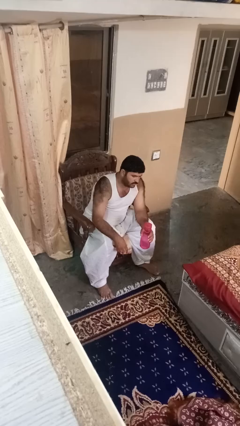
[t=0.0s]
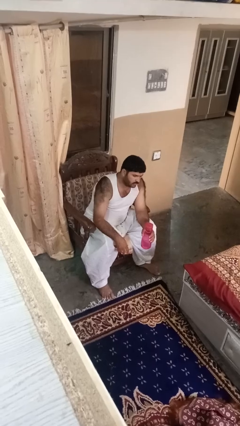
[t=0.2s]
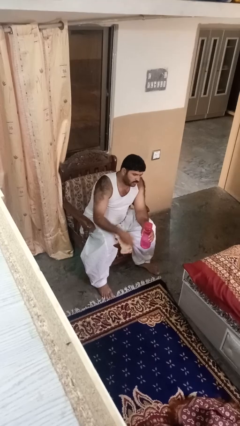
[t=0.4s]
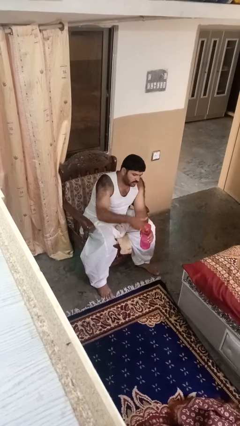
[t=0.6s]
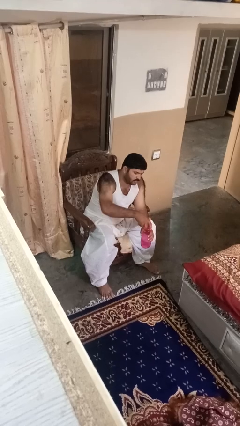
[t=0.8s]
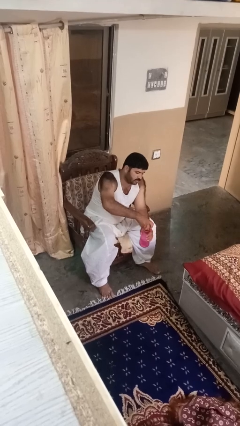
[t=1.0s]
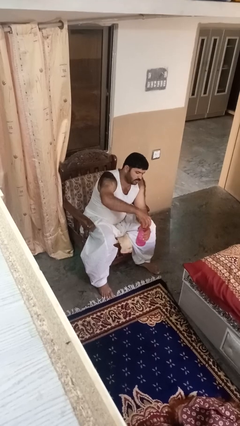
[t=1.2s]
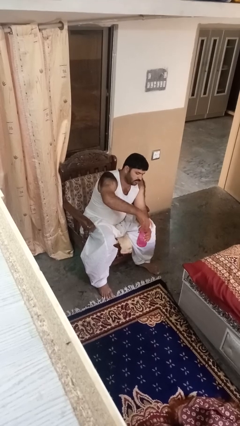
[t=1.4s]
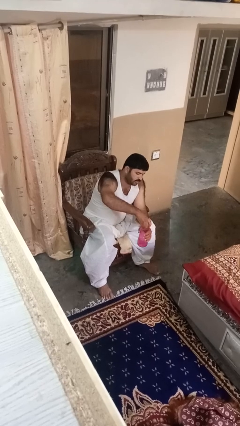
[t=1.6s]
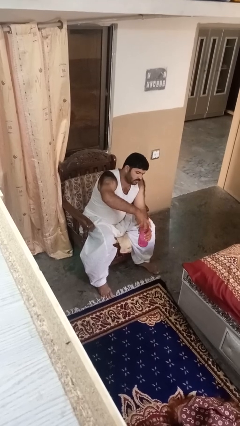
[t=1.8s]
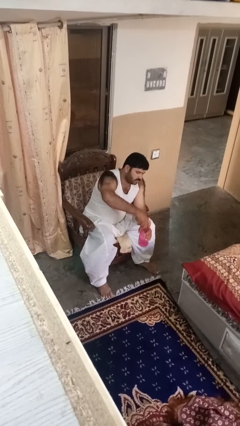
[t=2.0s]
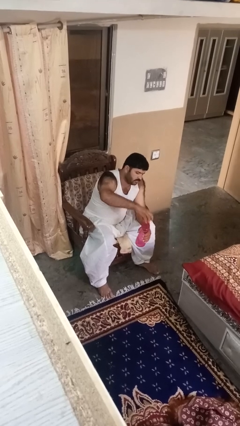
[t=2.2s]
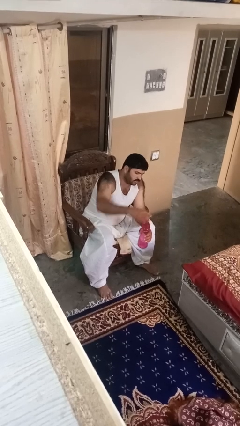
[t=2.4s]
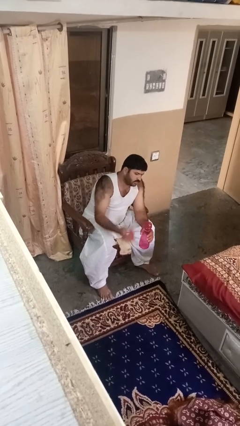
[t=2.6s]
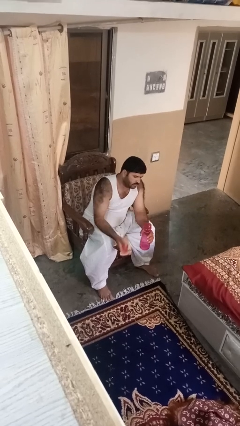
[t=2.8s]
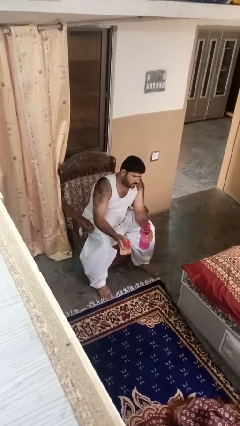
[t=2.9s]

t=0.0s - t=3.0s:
person unscrews lid from bottle

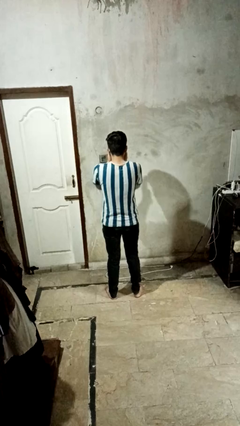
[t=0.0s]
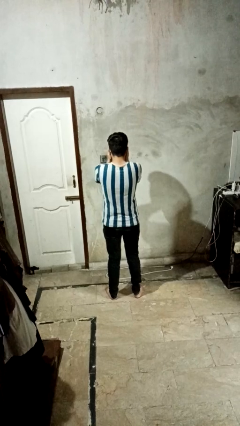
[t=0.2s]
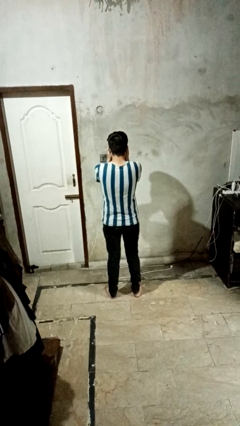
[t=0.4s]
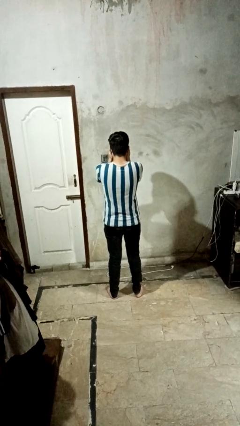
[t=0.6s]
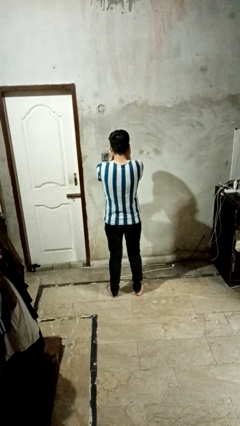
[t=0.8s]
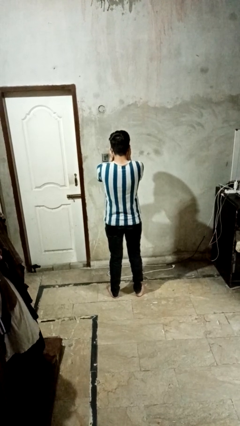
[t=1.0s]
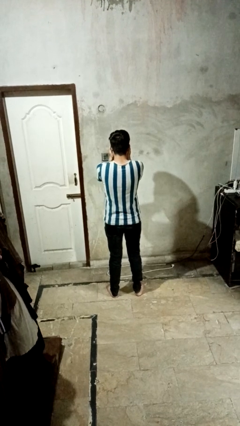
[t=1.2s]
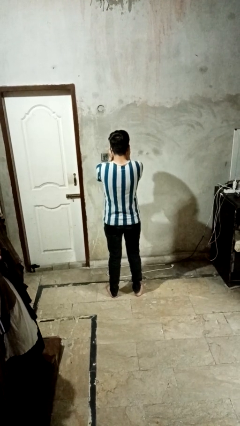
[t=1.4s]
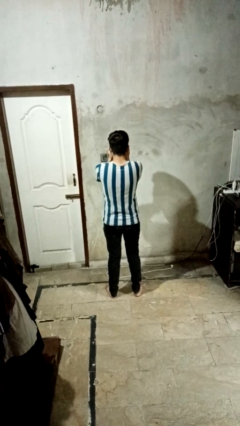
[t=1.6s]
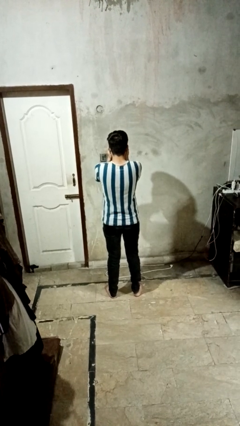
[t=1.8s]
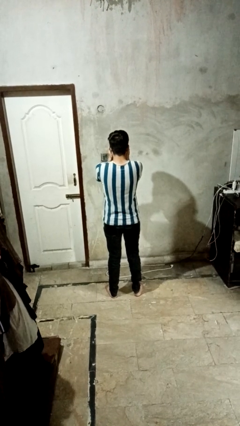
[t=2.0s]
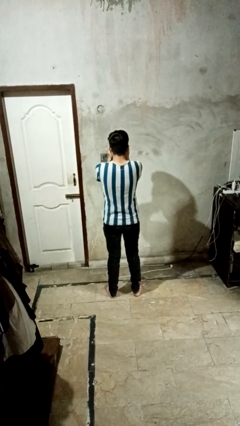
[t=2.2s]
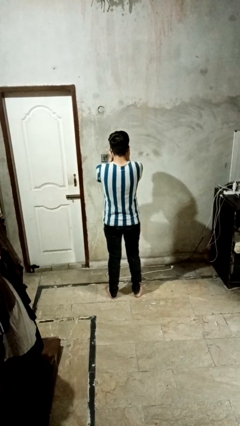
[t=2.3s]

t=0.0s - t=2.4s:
person covers face with hands

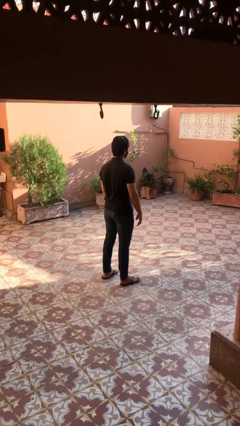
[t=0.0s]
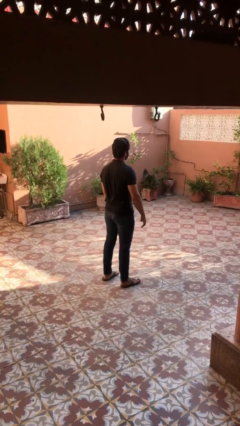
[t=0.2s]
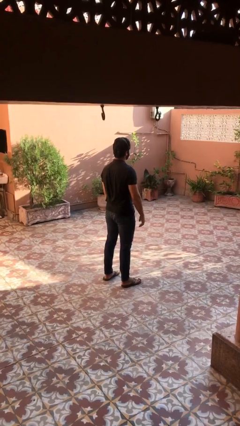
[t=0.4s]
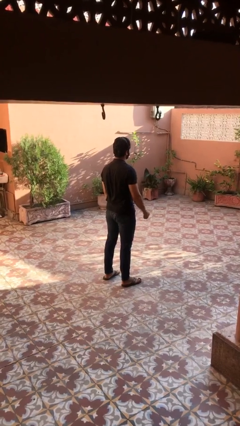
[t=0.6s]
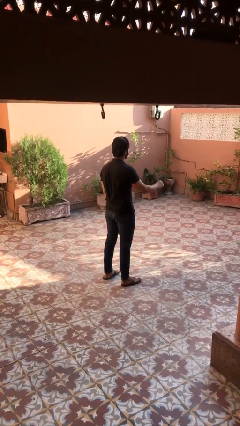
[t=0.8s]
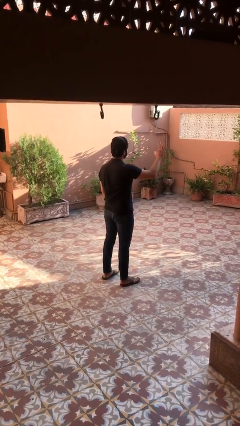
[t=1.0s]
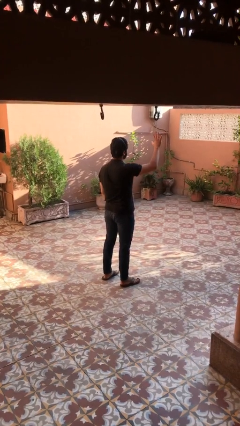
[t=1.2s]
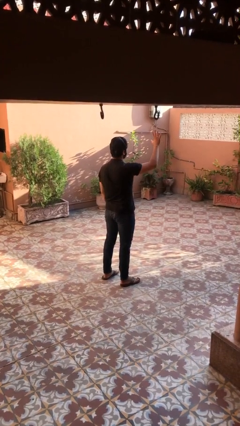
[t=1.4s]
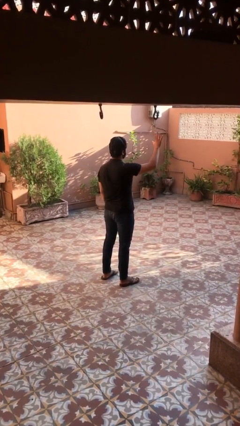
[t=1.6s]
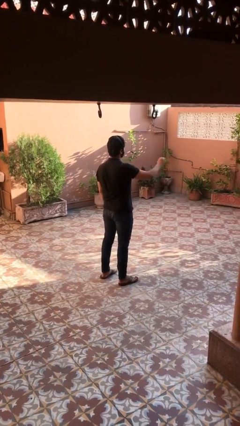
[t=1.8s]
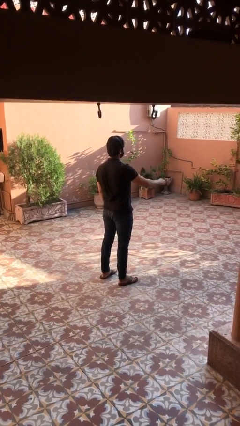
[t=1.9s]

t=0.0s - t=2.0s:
person gestures number five

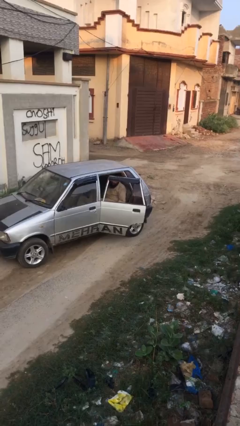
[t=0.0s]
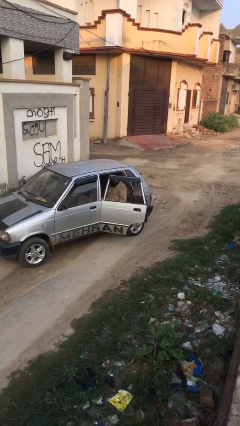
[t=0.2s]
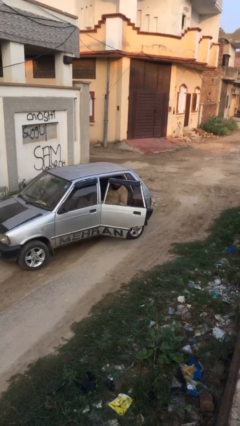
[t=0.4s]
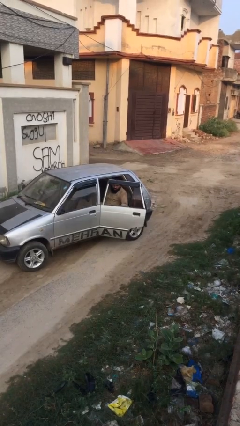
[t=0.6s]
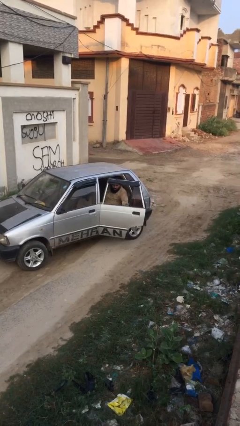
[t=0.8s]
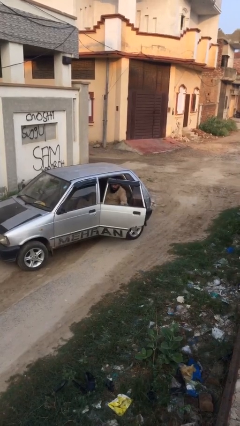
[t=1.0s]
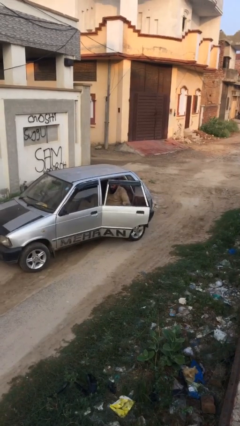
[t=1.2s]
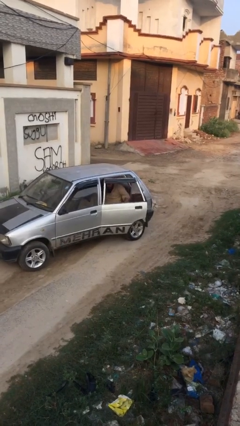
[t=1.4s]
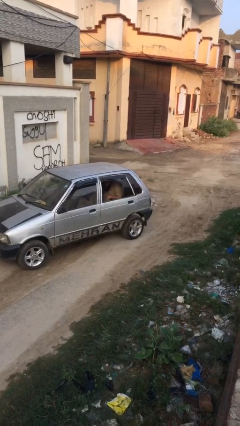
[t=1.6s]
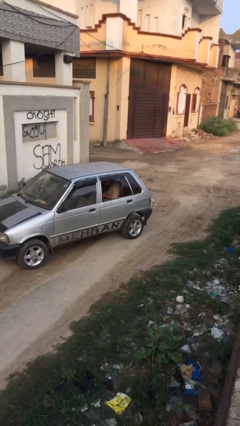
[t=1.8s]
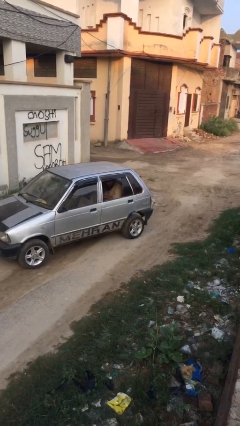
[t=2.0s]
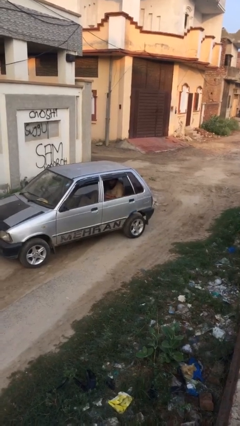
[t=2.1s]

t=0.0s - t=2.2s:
person closes car door

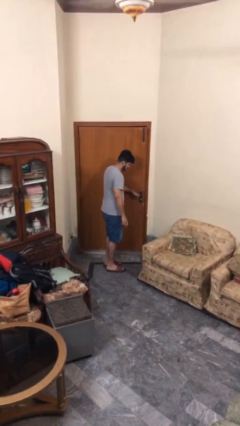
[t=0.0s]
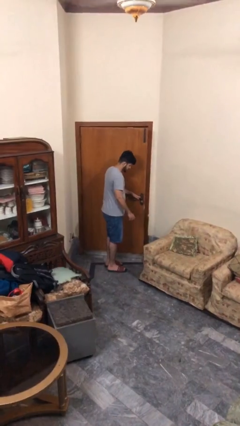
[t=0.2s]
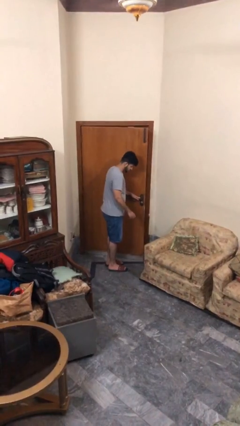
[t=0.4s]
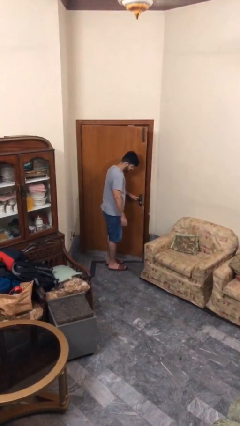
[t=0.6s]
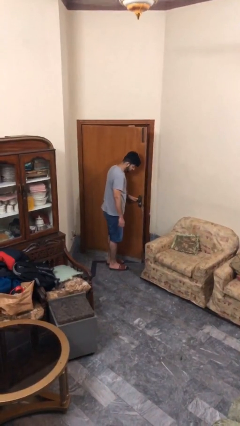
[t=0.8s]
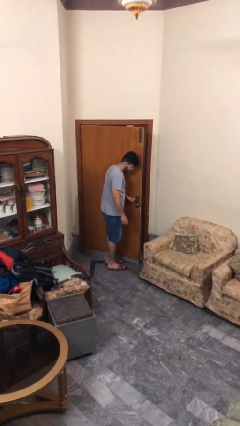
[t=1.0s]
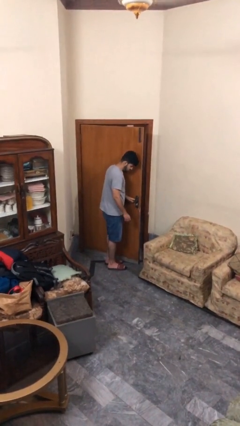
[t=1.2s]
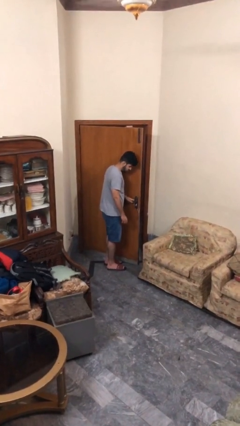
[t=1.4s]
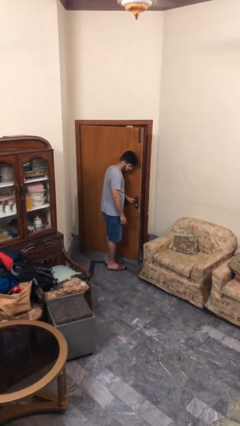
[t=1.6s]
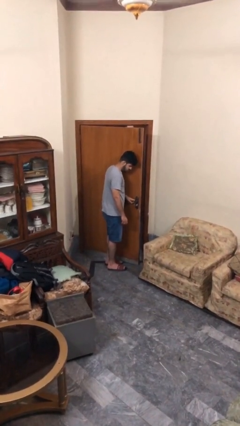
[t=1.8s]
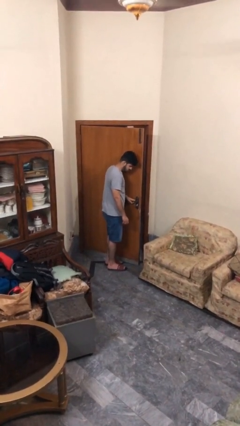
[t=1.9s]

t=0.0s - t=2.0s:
person opens facility door

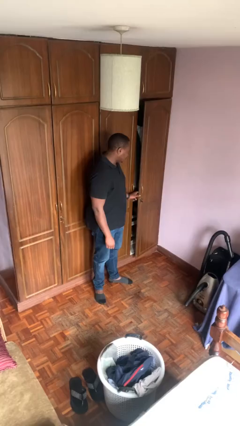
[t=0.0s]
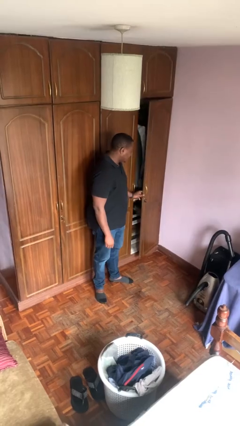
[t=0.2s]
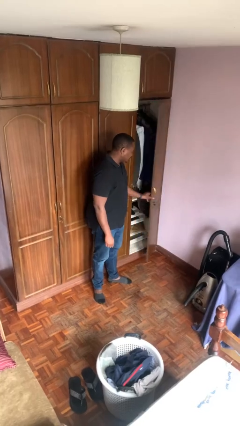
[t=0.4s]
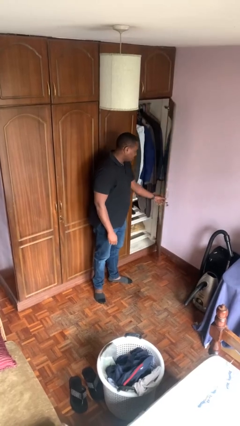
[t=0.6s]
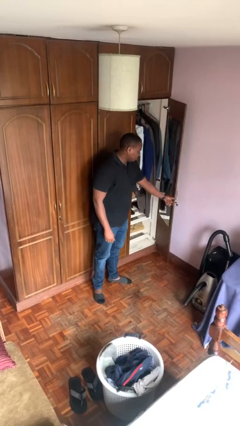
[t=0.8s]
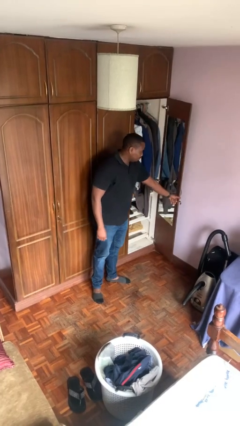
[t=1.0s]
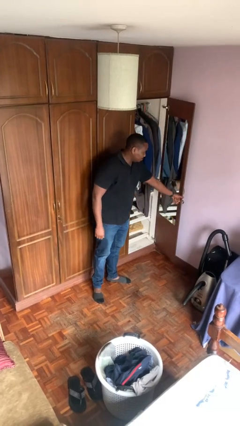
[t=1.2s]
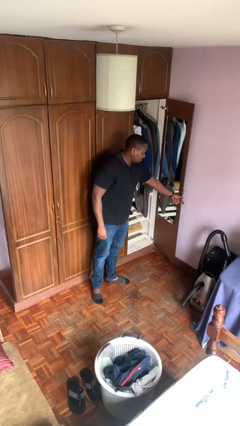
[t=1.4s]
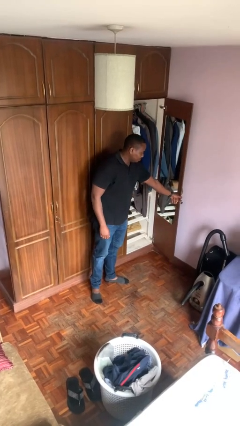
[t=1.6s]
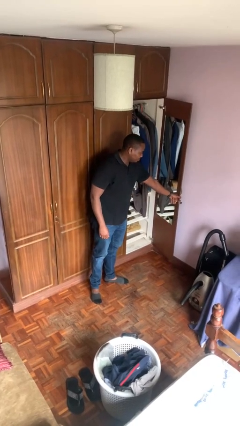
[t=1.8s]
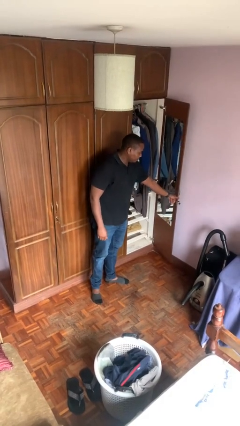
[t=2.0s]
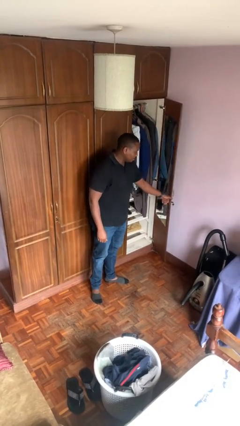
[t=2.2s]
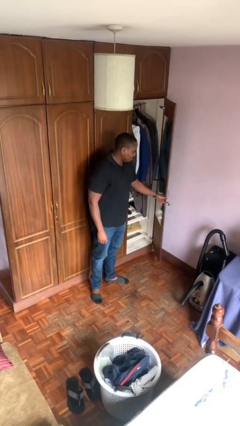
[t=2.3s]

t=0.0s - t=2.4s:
person opens closet door

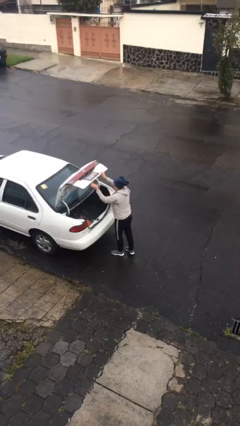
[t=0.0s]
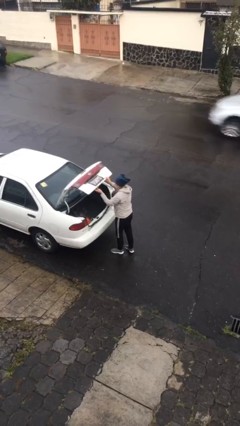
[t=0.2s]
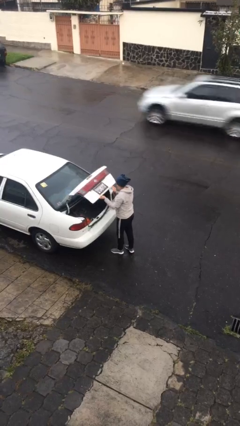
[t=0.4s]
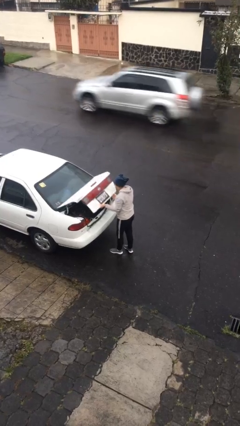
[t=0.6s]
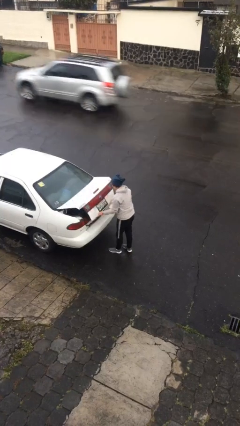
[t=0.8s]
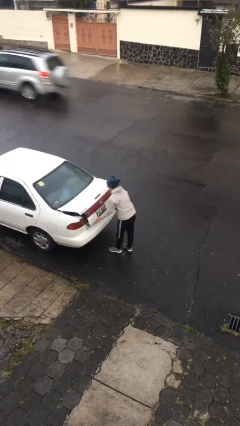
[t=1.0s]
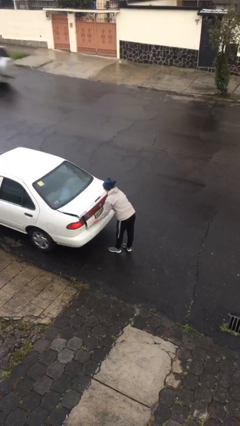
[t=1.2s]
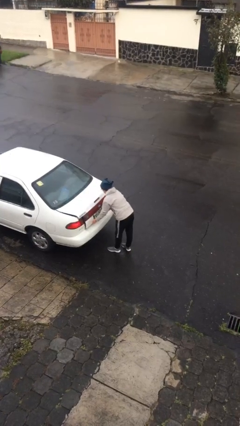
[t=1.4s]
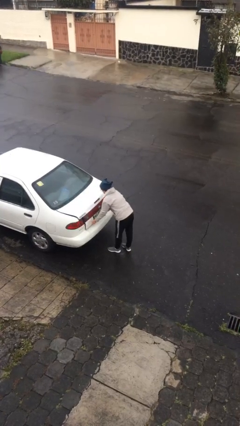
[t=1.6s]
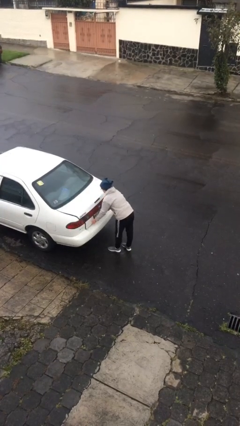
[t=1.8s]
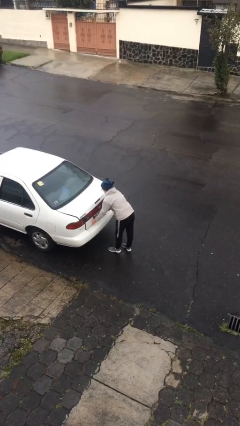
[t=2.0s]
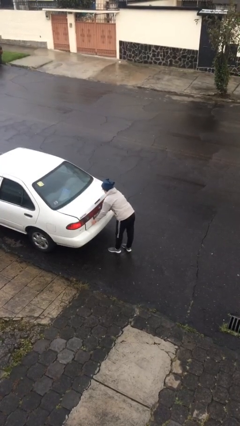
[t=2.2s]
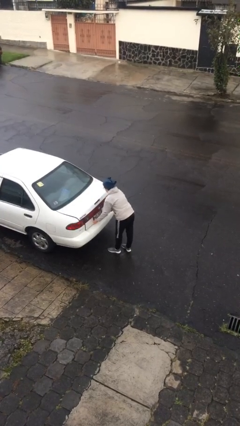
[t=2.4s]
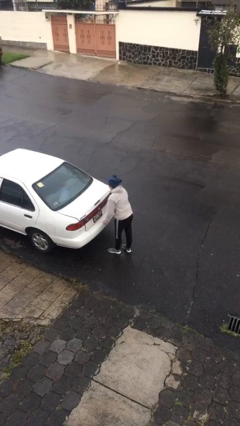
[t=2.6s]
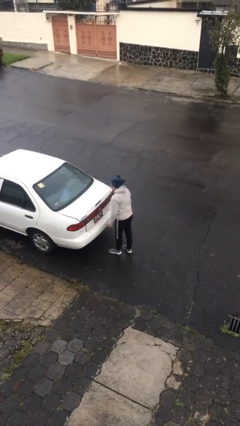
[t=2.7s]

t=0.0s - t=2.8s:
person closes car trunk

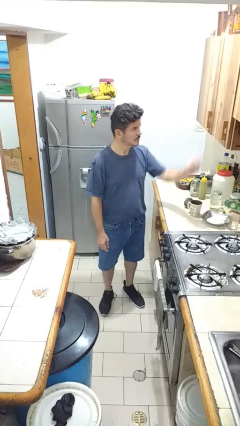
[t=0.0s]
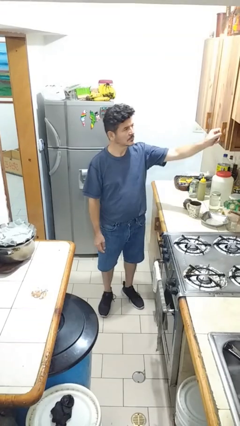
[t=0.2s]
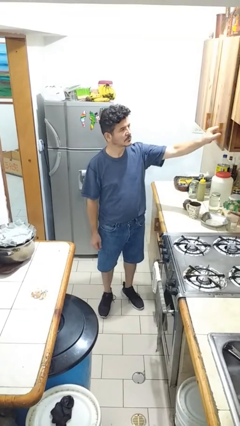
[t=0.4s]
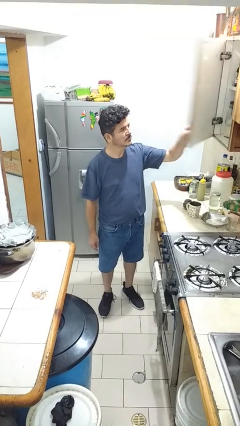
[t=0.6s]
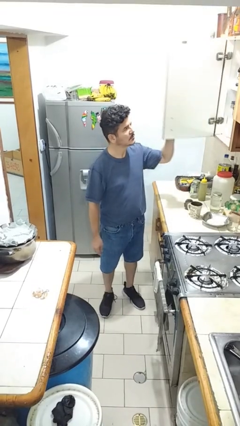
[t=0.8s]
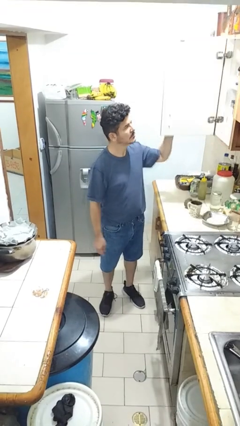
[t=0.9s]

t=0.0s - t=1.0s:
person opens cabinet
